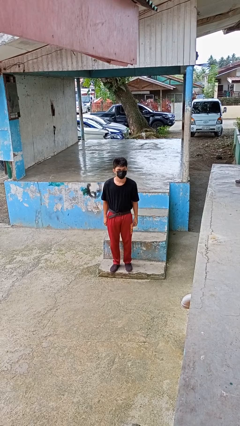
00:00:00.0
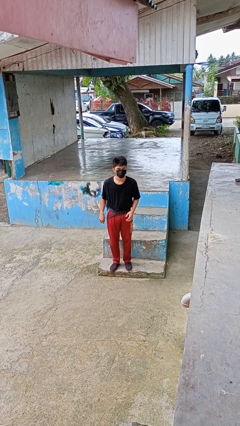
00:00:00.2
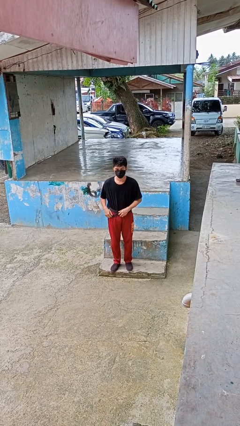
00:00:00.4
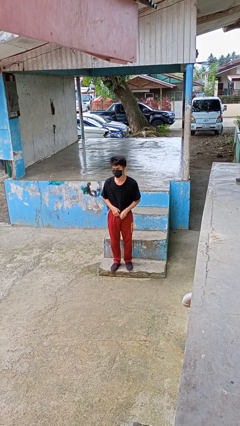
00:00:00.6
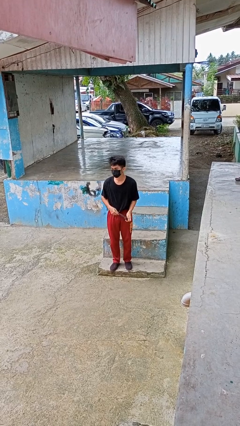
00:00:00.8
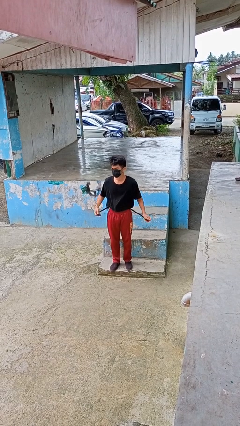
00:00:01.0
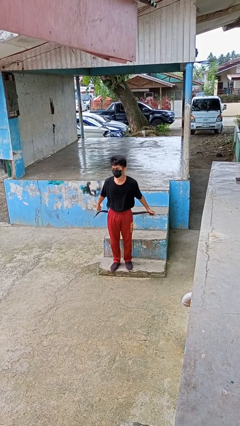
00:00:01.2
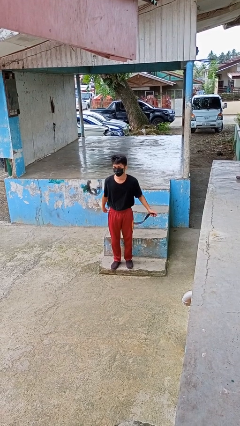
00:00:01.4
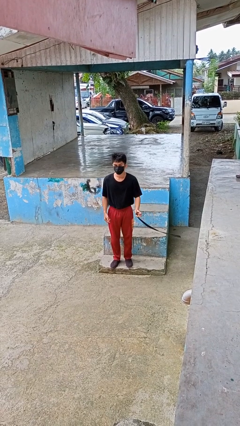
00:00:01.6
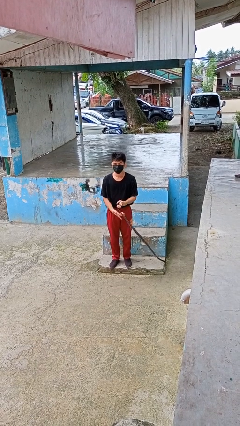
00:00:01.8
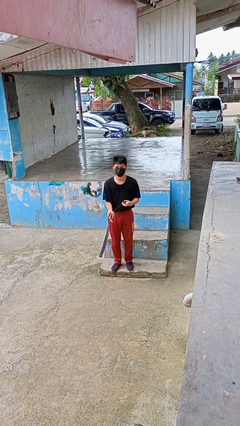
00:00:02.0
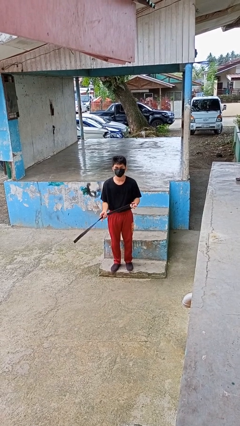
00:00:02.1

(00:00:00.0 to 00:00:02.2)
person takes off belt

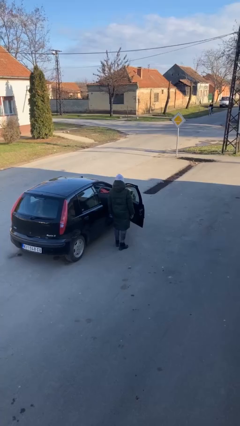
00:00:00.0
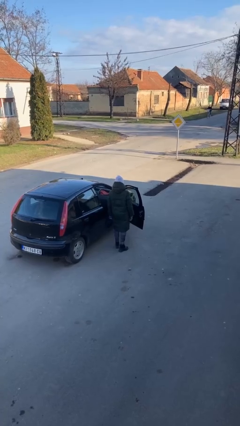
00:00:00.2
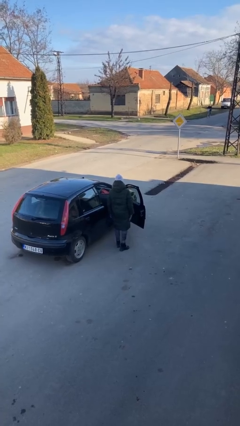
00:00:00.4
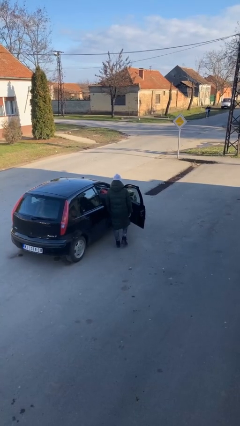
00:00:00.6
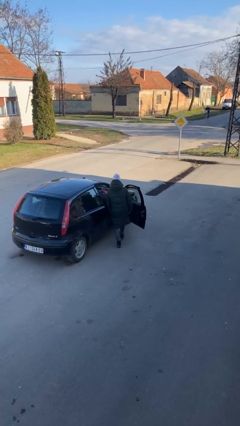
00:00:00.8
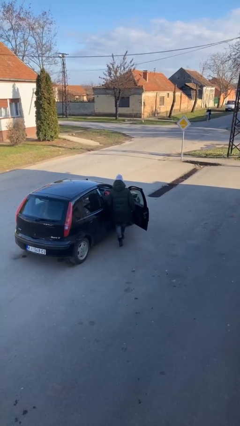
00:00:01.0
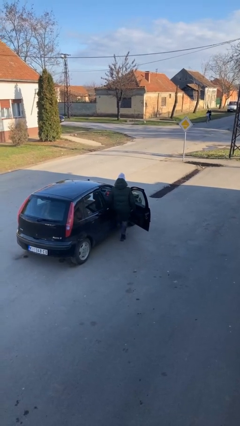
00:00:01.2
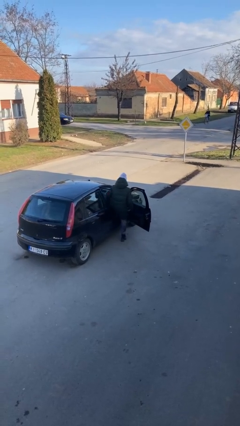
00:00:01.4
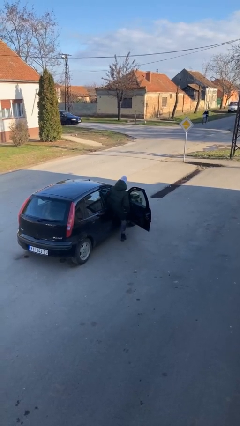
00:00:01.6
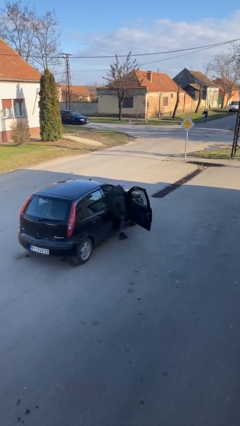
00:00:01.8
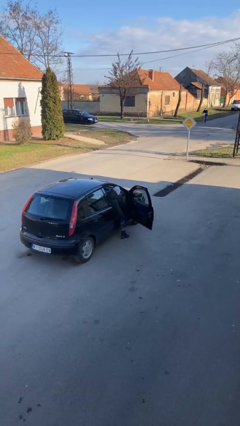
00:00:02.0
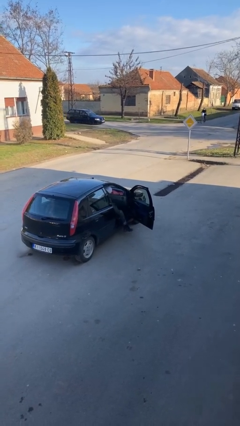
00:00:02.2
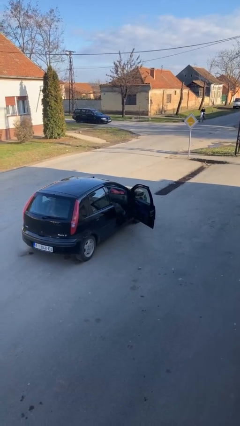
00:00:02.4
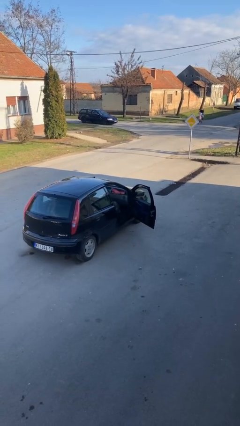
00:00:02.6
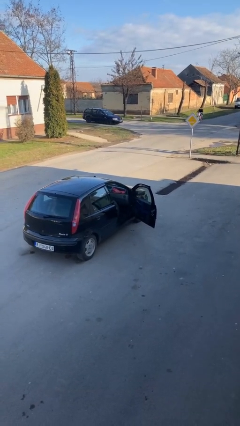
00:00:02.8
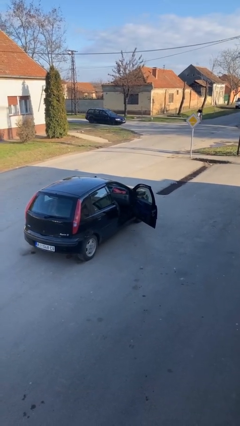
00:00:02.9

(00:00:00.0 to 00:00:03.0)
person enters car

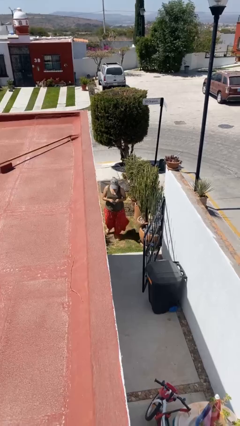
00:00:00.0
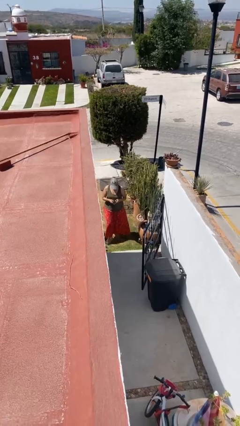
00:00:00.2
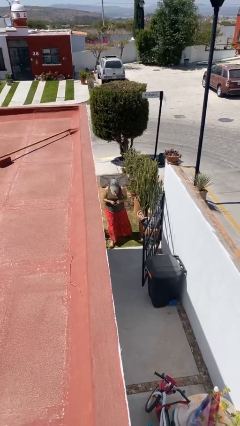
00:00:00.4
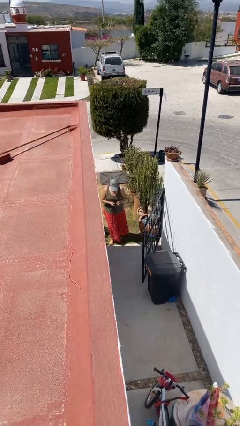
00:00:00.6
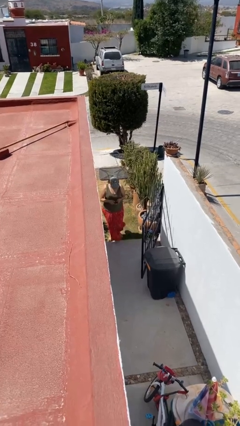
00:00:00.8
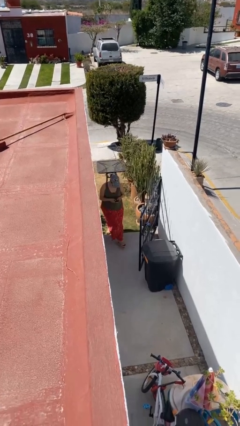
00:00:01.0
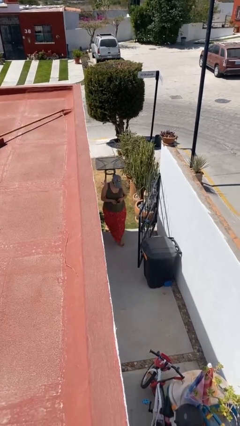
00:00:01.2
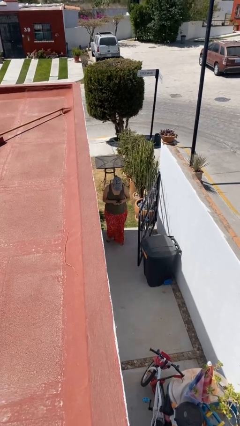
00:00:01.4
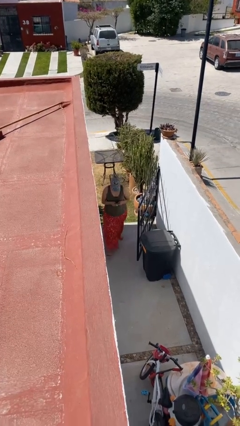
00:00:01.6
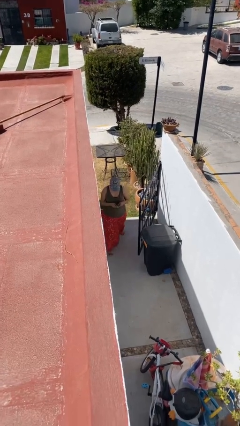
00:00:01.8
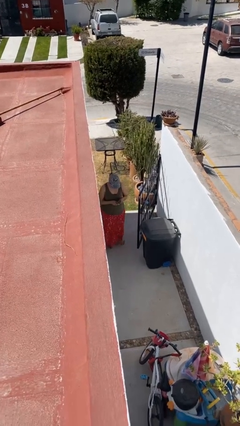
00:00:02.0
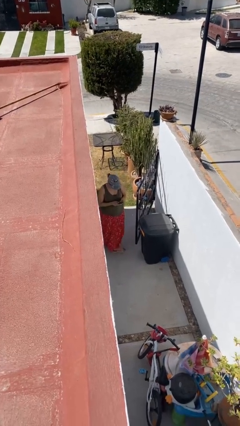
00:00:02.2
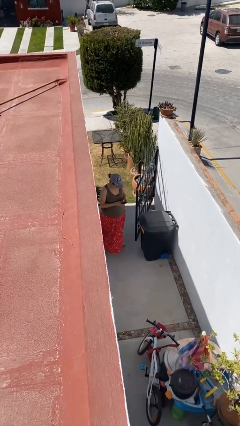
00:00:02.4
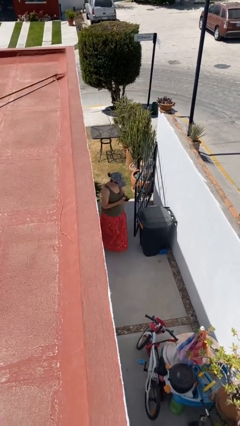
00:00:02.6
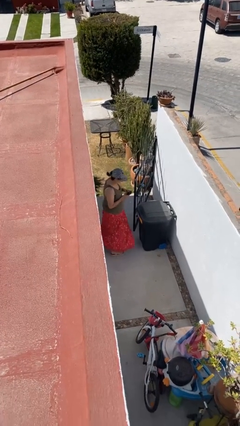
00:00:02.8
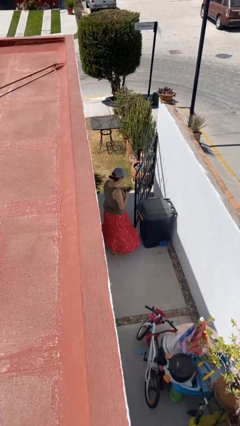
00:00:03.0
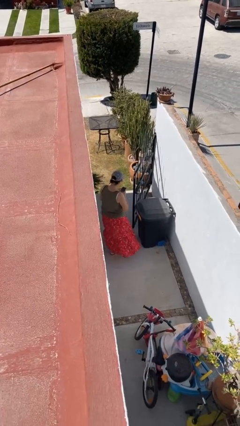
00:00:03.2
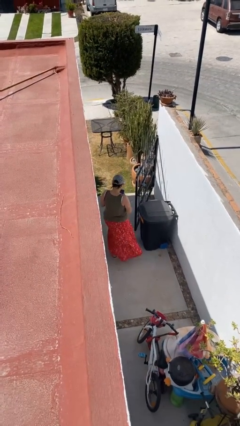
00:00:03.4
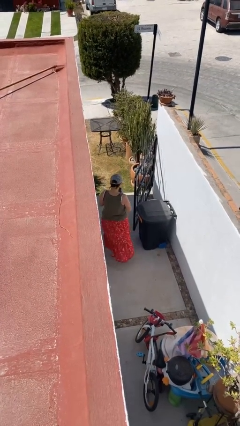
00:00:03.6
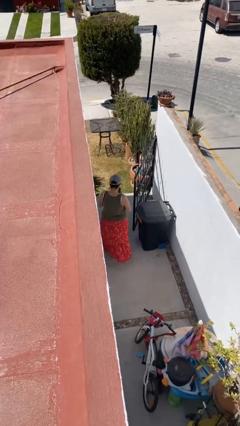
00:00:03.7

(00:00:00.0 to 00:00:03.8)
person enters scene through structure

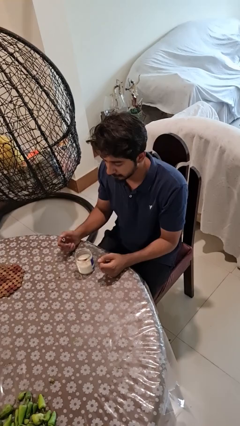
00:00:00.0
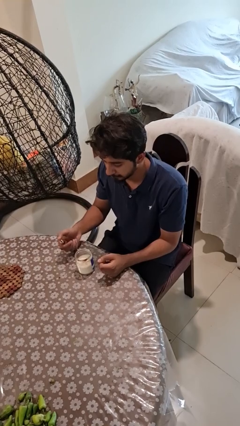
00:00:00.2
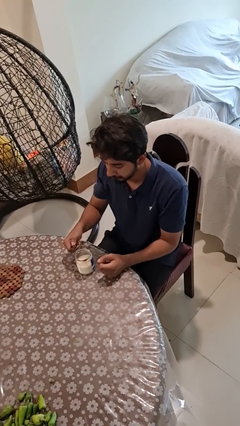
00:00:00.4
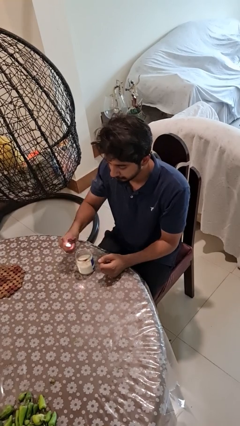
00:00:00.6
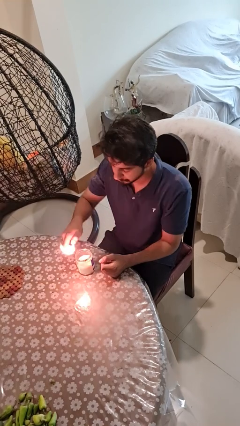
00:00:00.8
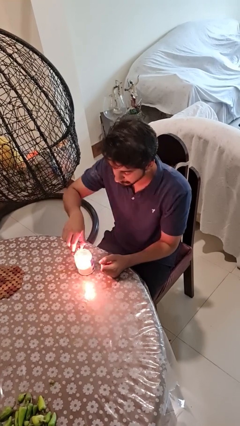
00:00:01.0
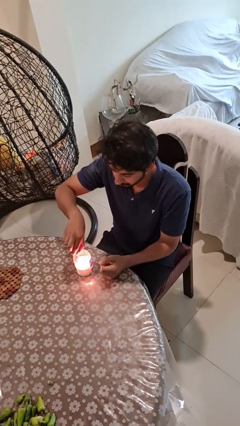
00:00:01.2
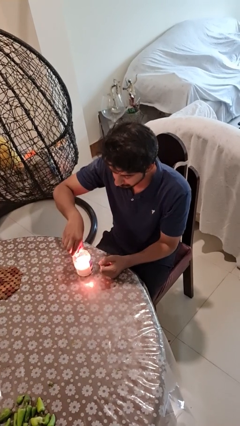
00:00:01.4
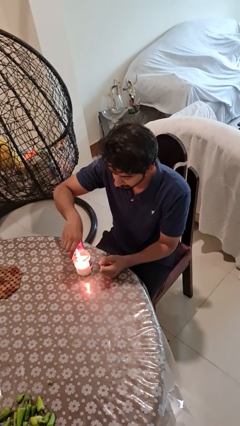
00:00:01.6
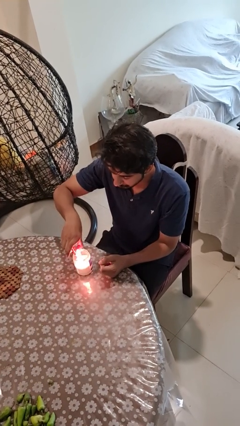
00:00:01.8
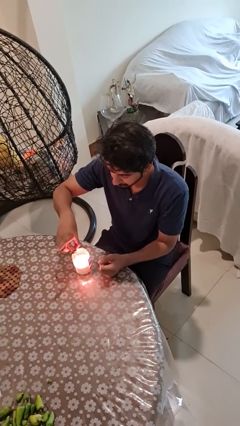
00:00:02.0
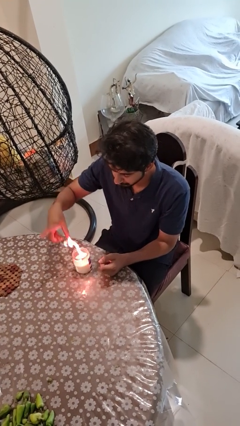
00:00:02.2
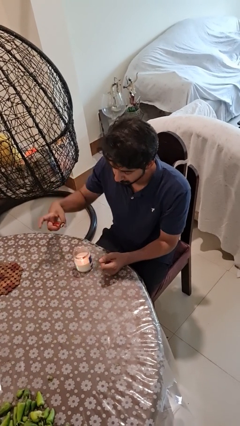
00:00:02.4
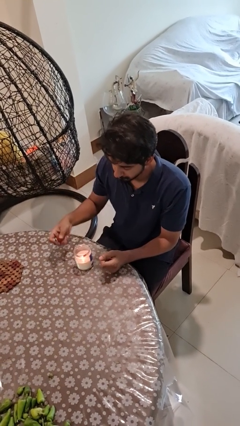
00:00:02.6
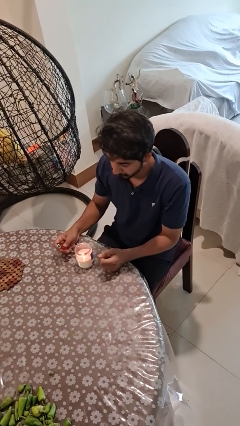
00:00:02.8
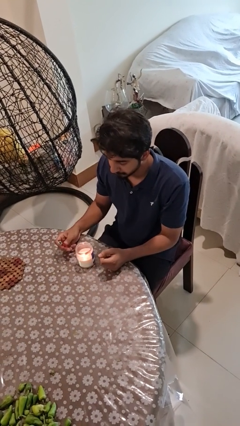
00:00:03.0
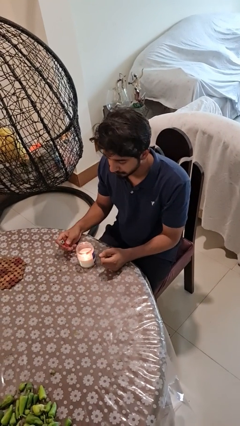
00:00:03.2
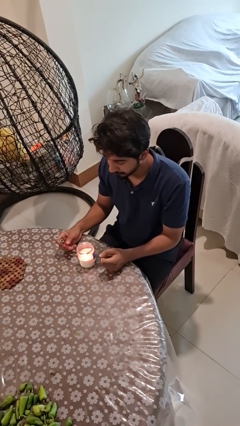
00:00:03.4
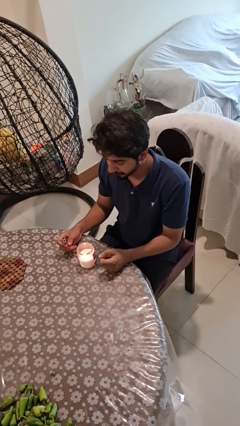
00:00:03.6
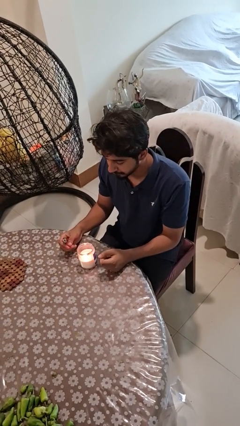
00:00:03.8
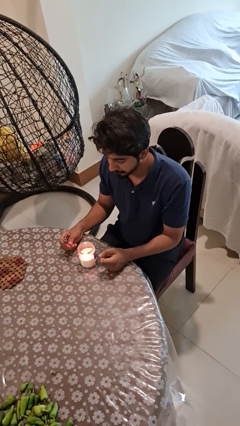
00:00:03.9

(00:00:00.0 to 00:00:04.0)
person lights candle

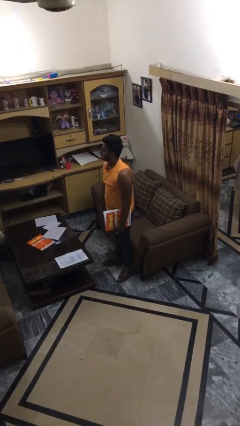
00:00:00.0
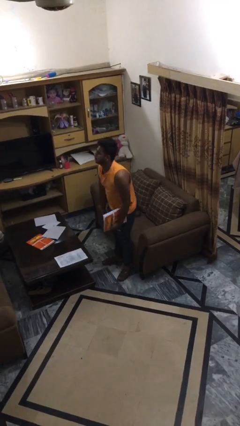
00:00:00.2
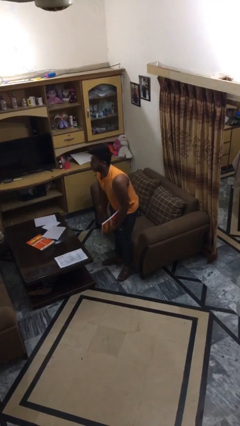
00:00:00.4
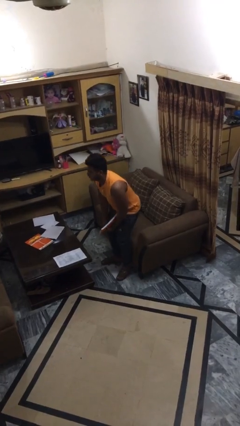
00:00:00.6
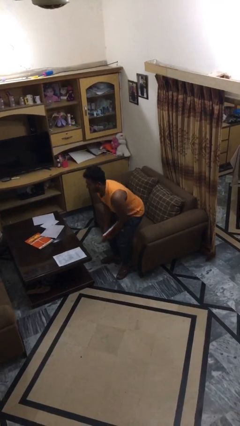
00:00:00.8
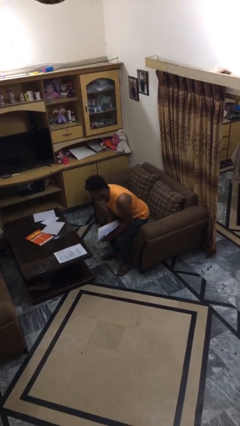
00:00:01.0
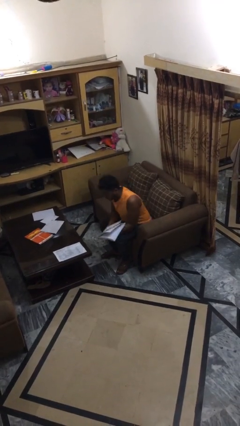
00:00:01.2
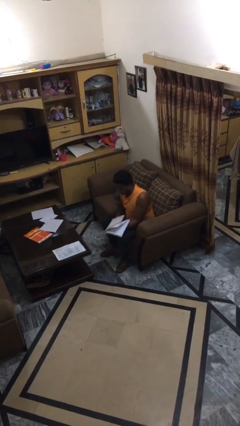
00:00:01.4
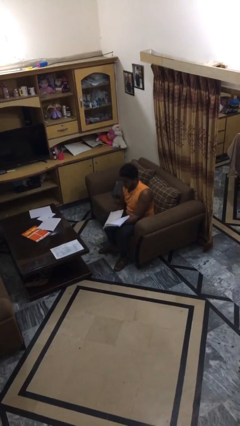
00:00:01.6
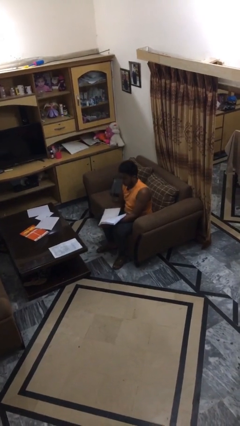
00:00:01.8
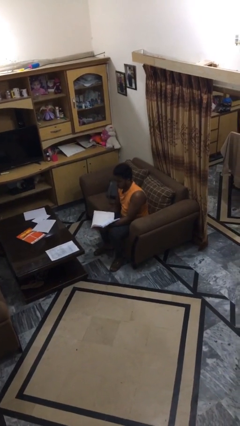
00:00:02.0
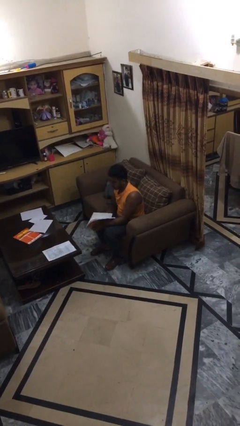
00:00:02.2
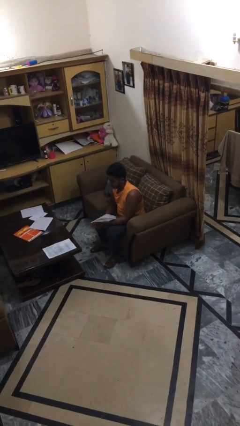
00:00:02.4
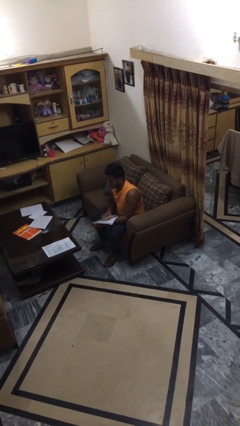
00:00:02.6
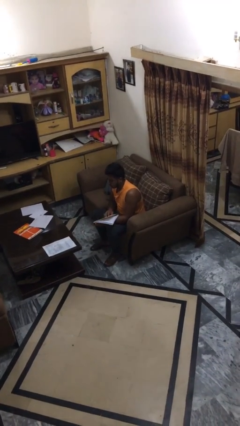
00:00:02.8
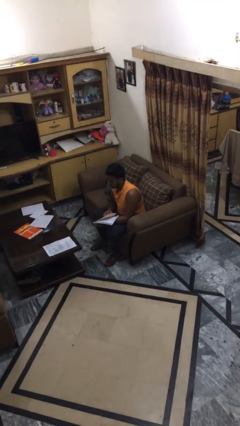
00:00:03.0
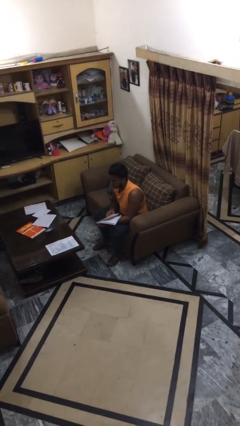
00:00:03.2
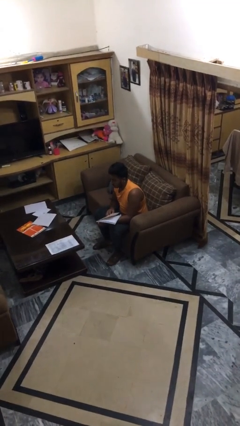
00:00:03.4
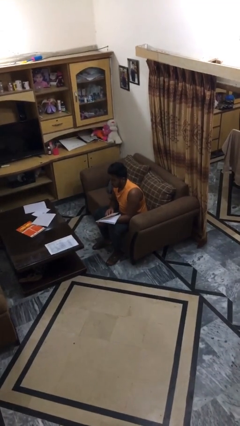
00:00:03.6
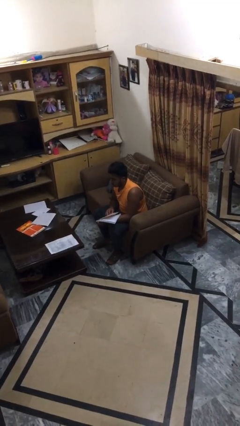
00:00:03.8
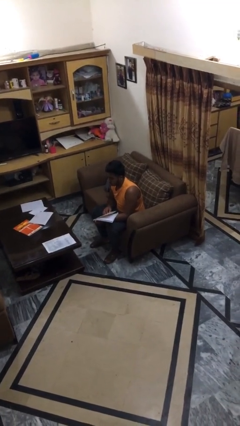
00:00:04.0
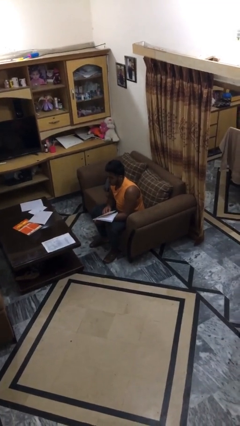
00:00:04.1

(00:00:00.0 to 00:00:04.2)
person sits down

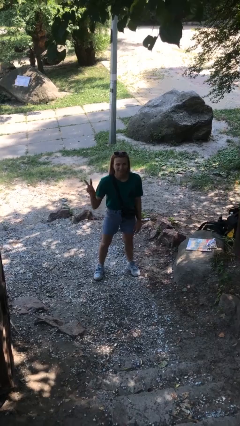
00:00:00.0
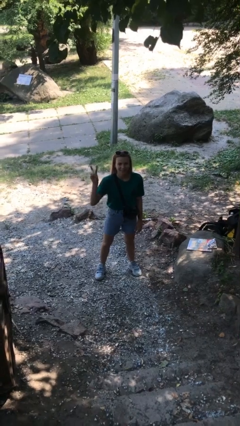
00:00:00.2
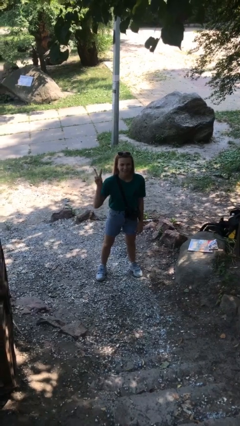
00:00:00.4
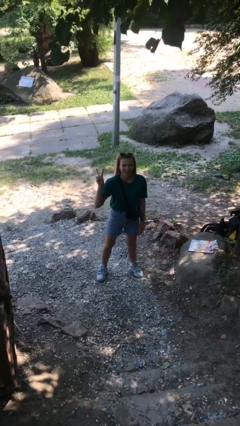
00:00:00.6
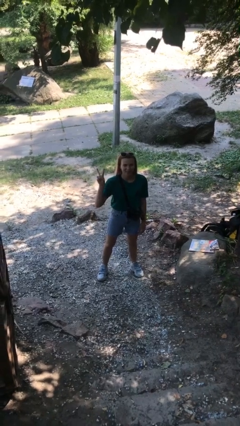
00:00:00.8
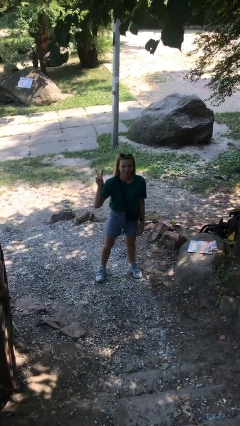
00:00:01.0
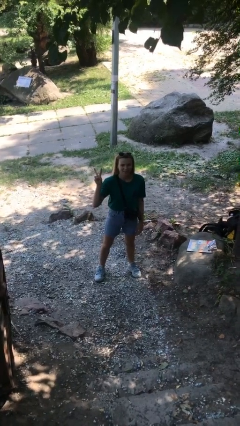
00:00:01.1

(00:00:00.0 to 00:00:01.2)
person gestures peace
